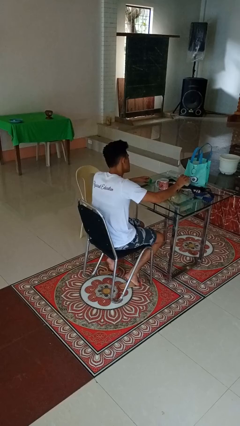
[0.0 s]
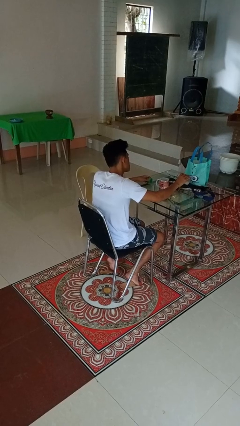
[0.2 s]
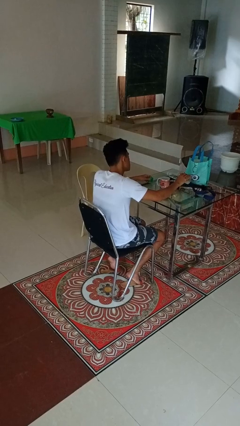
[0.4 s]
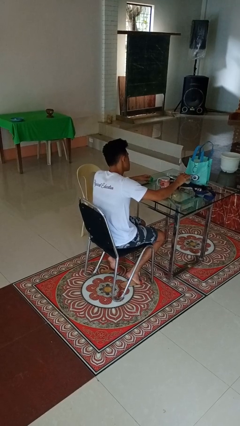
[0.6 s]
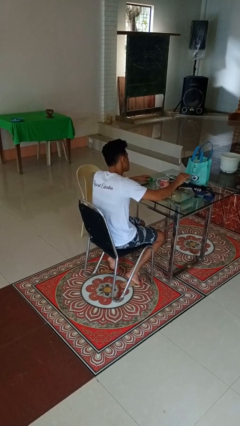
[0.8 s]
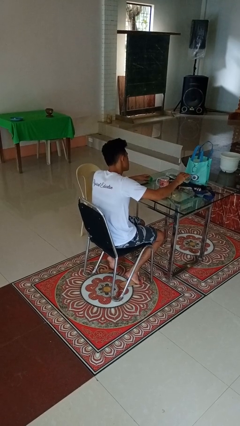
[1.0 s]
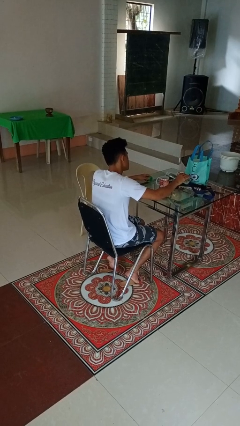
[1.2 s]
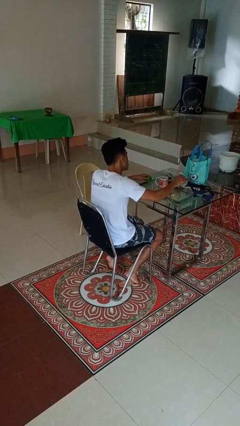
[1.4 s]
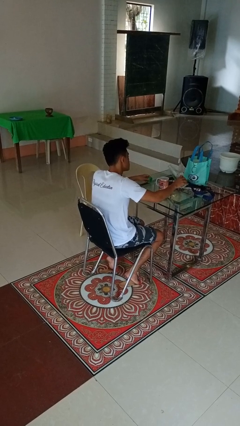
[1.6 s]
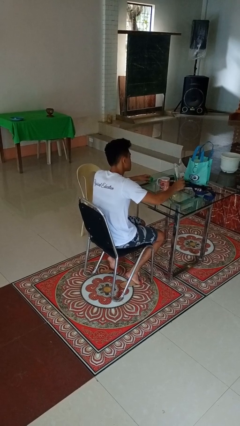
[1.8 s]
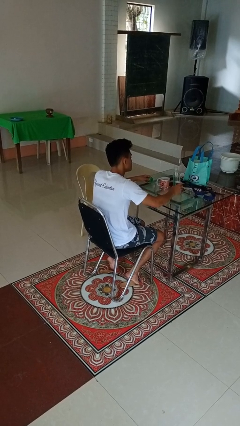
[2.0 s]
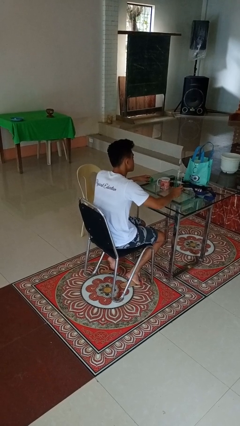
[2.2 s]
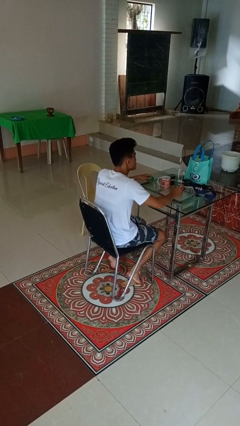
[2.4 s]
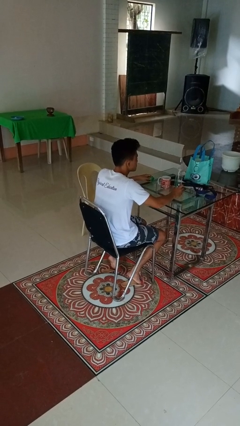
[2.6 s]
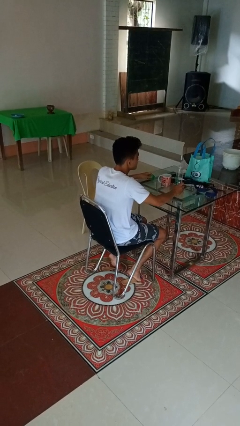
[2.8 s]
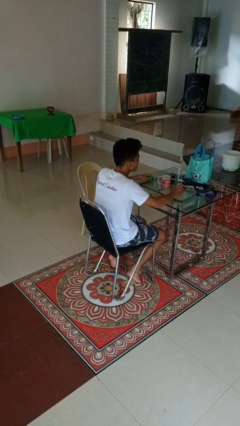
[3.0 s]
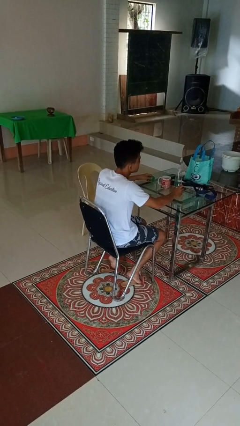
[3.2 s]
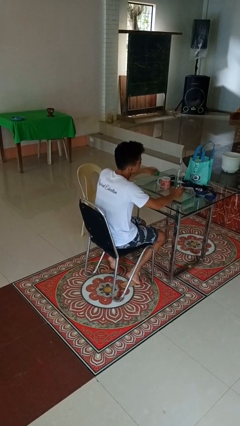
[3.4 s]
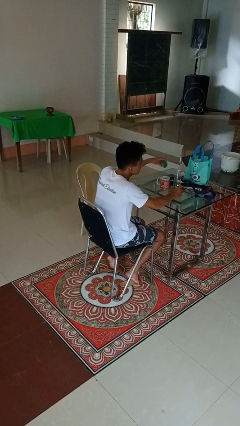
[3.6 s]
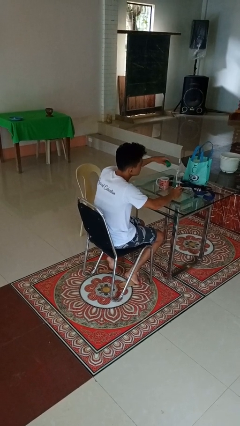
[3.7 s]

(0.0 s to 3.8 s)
person pours liquid into cup

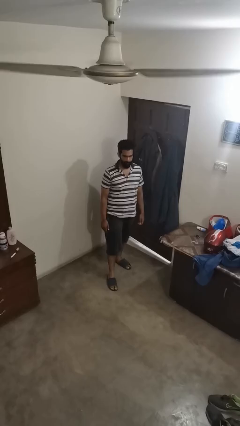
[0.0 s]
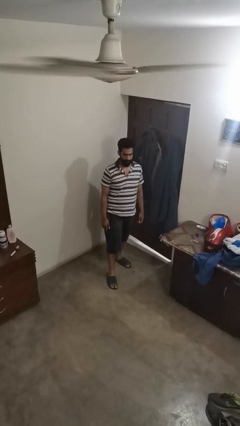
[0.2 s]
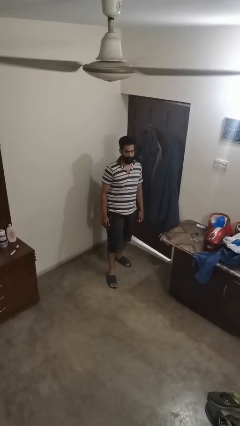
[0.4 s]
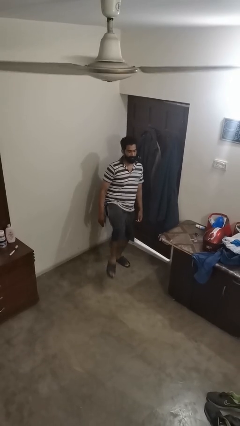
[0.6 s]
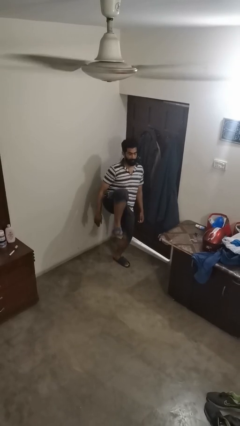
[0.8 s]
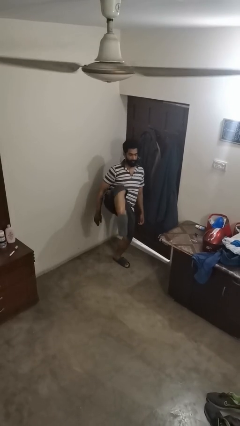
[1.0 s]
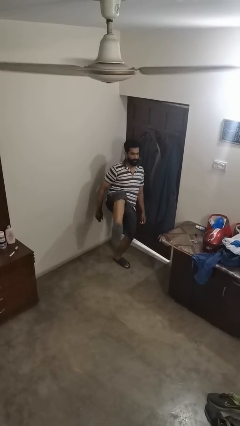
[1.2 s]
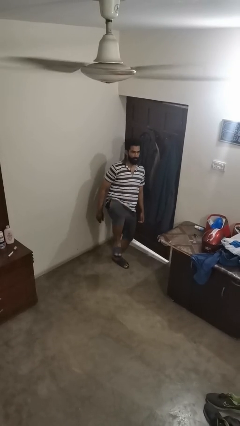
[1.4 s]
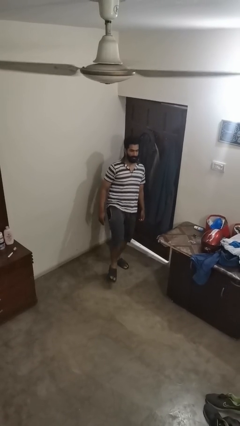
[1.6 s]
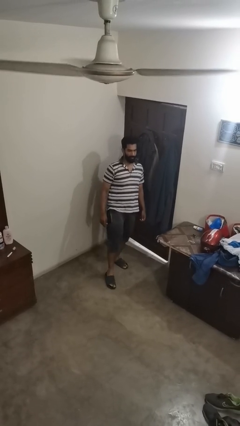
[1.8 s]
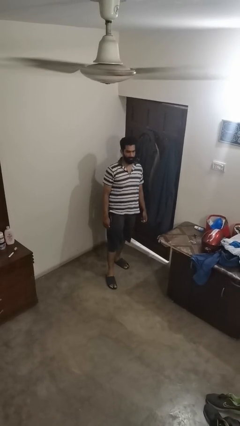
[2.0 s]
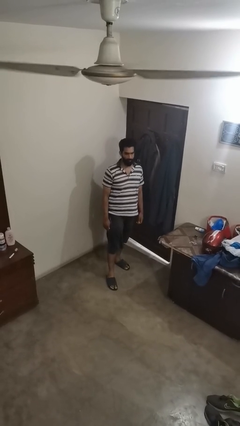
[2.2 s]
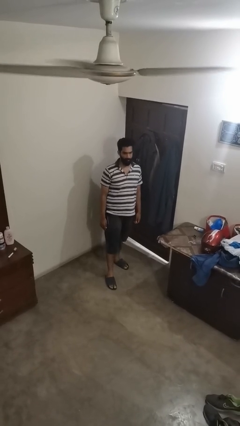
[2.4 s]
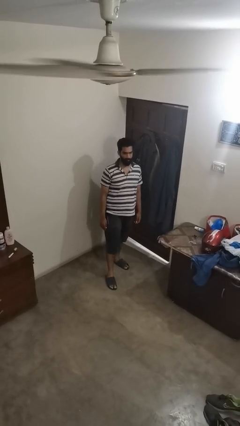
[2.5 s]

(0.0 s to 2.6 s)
person karate kicks

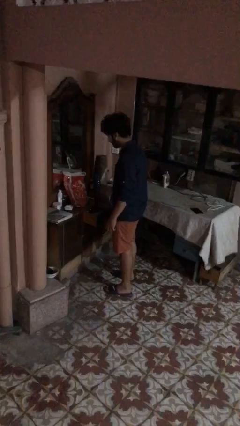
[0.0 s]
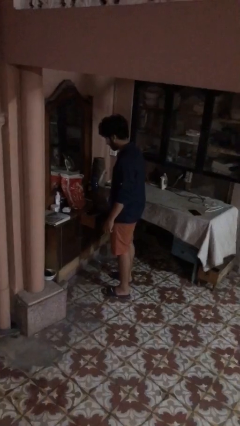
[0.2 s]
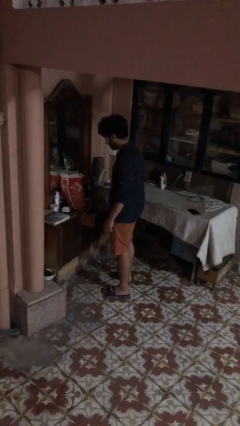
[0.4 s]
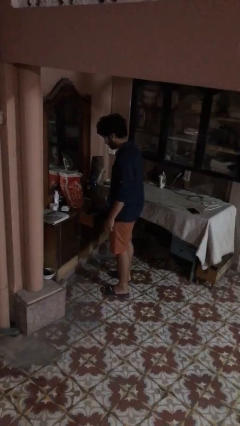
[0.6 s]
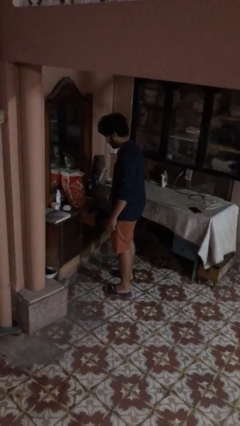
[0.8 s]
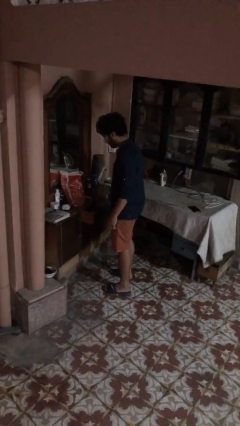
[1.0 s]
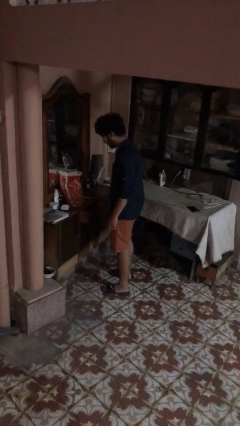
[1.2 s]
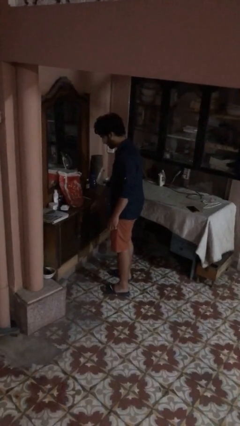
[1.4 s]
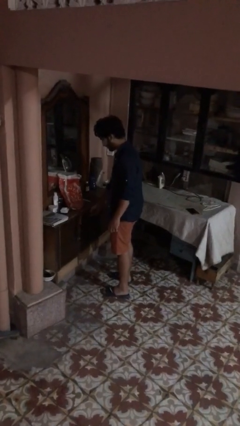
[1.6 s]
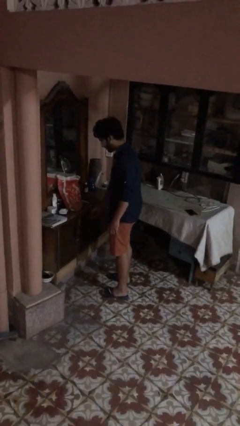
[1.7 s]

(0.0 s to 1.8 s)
person closes dresser drawer

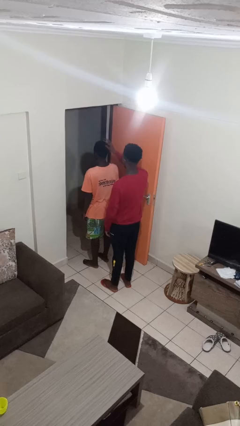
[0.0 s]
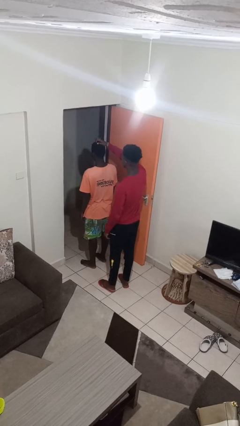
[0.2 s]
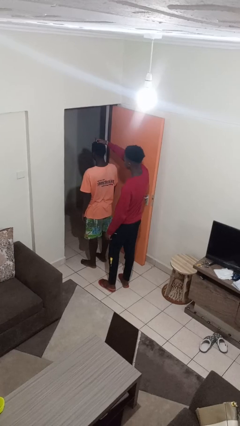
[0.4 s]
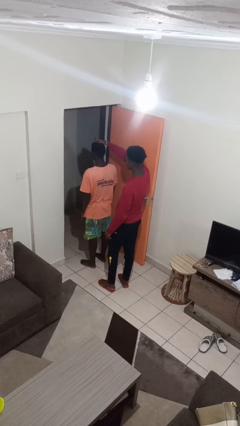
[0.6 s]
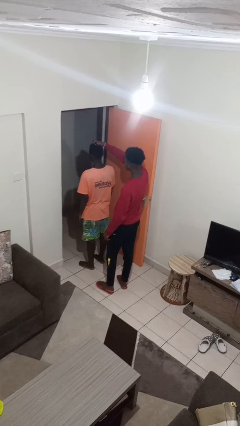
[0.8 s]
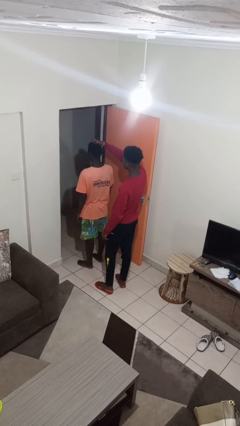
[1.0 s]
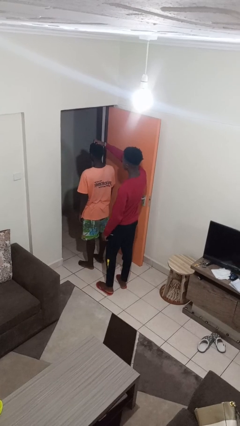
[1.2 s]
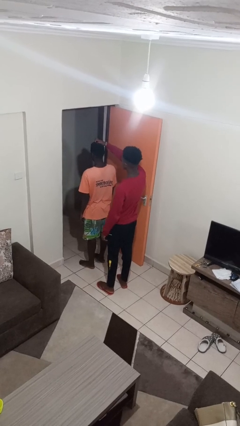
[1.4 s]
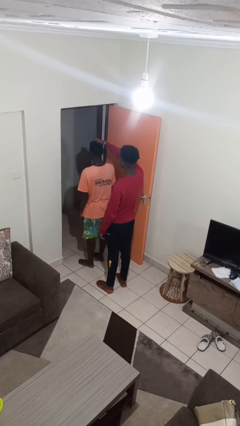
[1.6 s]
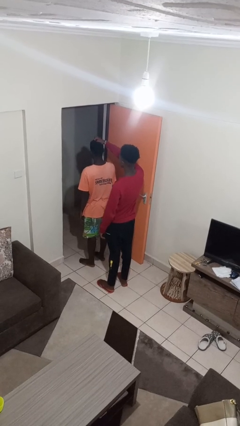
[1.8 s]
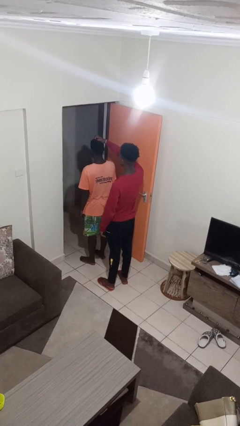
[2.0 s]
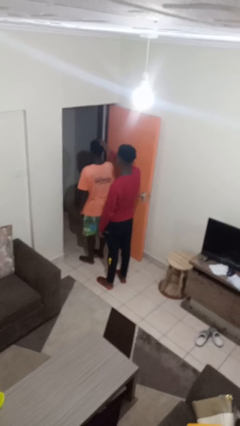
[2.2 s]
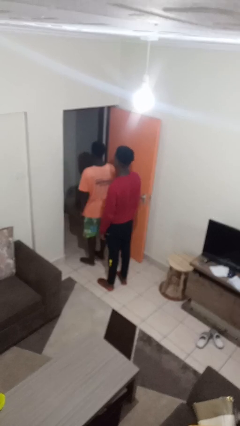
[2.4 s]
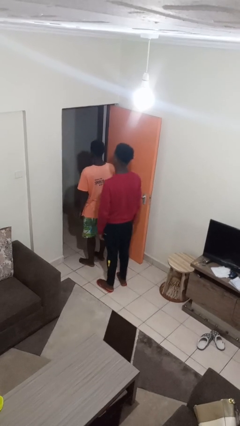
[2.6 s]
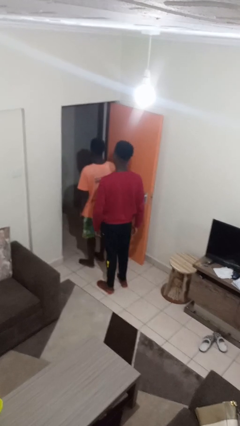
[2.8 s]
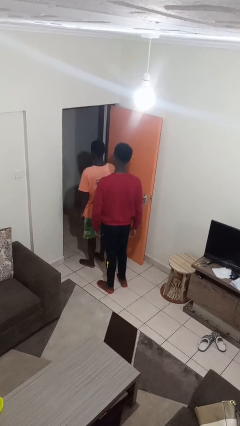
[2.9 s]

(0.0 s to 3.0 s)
person grabs person by hair

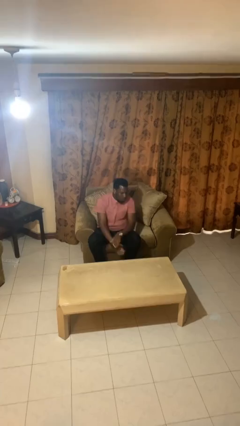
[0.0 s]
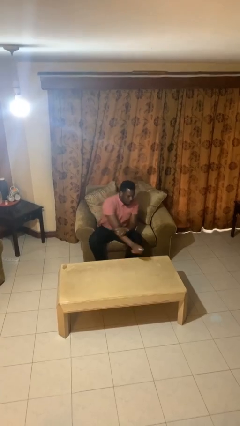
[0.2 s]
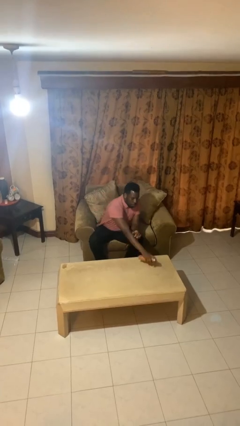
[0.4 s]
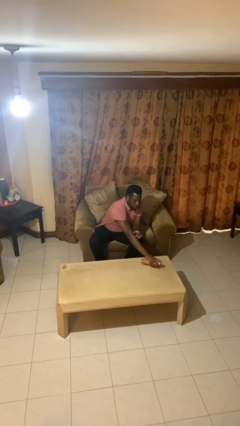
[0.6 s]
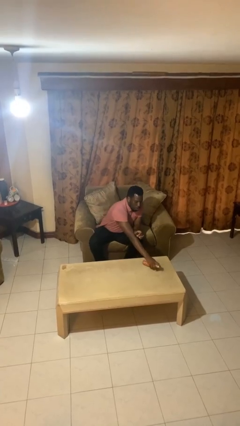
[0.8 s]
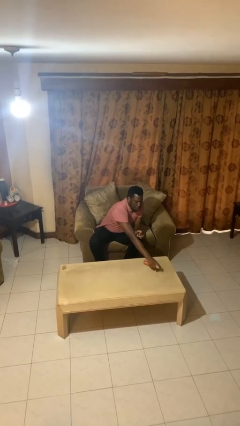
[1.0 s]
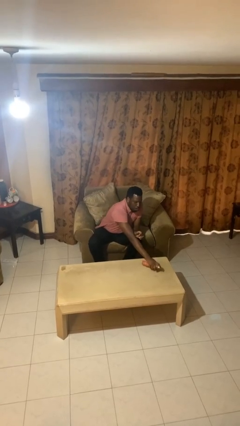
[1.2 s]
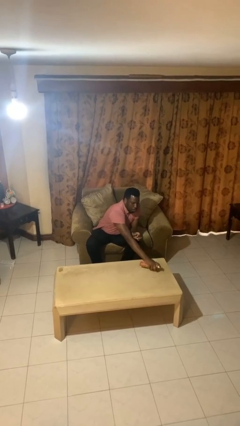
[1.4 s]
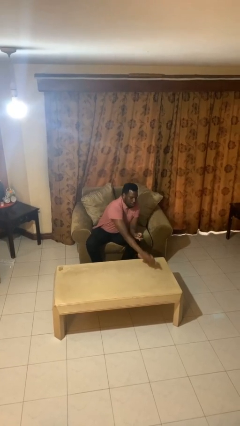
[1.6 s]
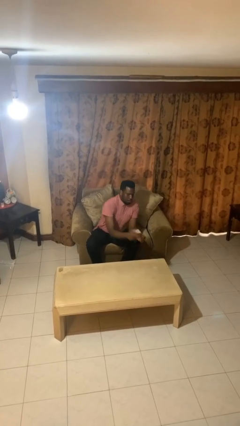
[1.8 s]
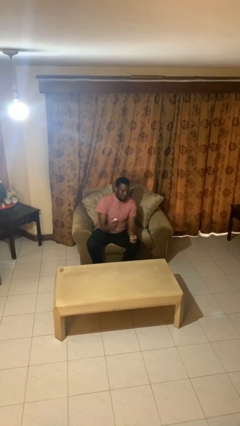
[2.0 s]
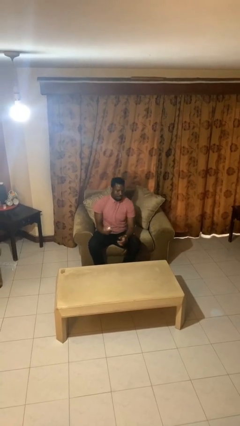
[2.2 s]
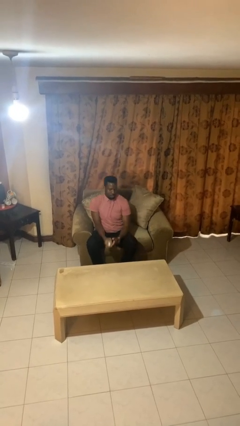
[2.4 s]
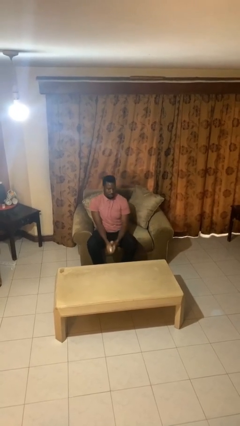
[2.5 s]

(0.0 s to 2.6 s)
person sprays from bottle

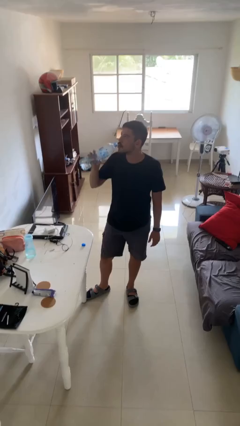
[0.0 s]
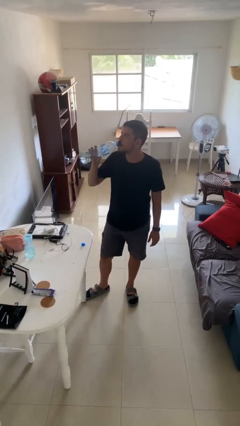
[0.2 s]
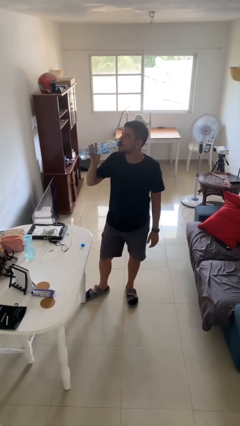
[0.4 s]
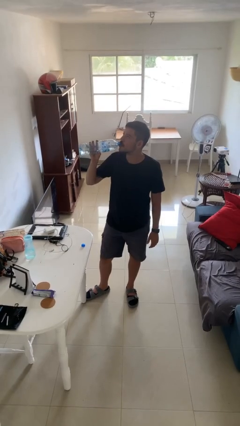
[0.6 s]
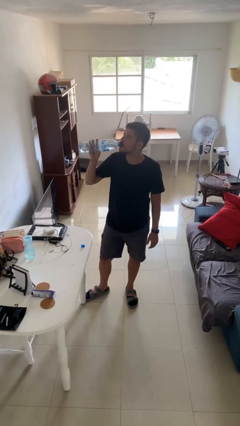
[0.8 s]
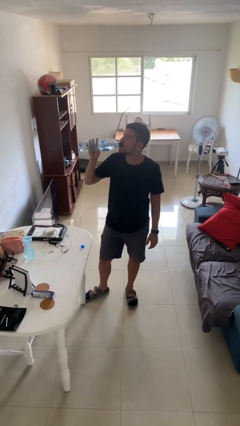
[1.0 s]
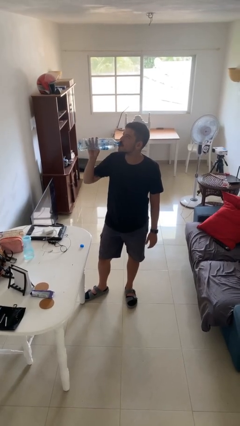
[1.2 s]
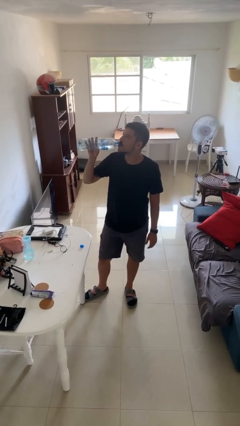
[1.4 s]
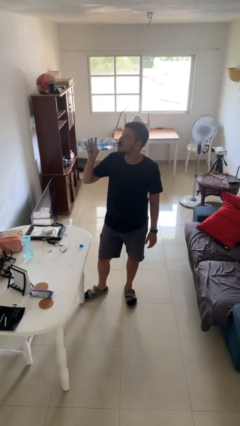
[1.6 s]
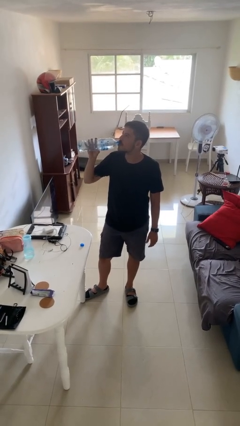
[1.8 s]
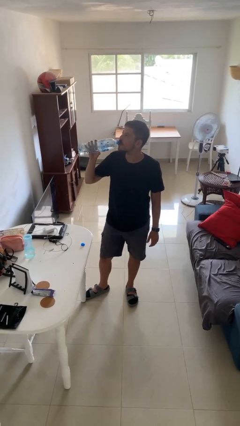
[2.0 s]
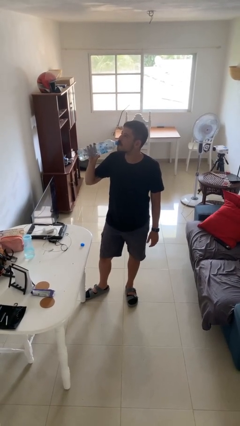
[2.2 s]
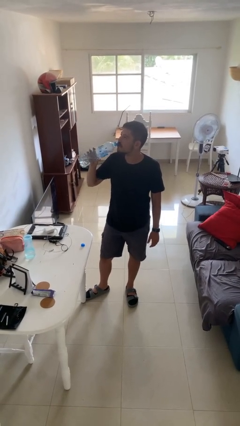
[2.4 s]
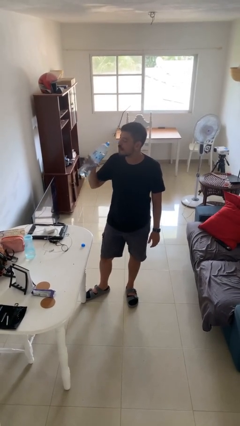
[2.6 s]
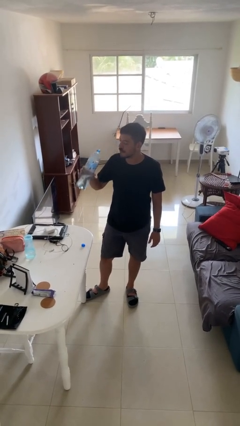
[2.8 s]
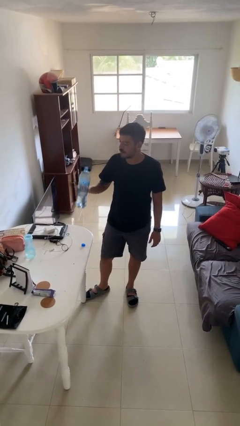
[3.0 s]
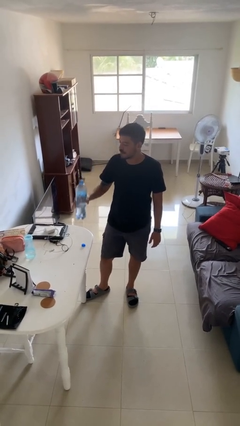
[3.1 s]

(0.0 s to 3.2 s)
person drinks from bottle

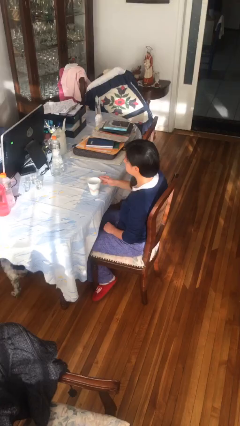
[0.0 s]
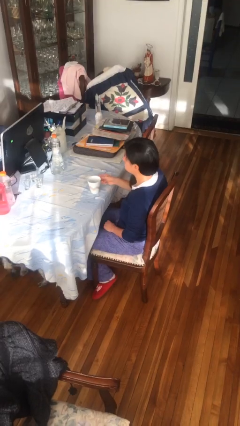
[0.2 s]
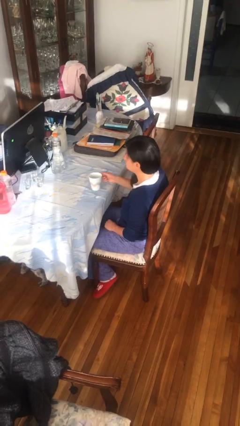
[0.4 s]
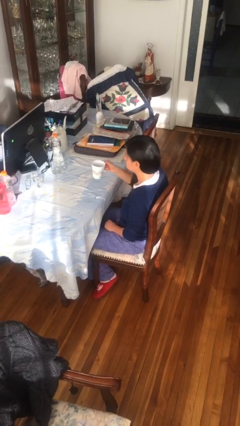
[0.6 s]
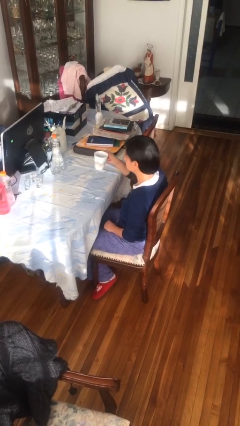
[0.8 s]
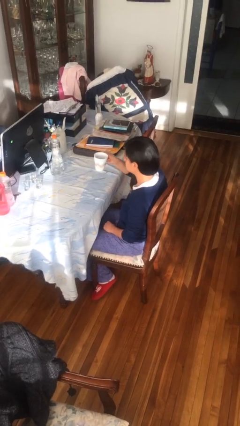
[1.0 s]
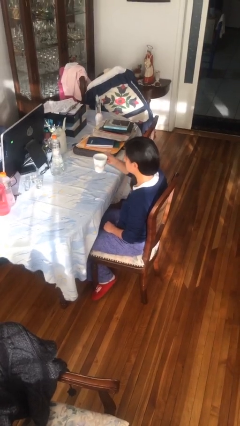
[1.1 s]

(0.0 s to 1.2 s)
person picks up object from table
